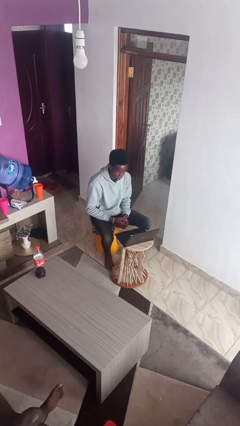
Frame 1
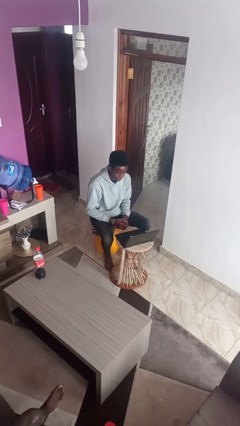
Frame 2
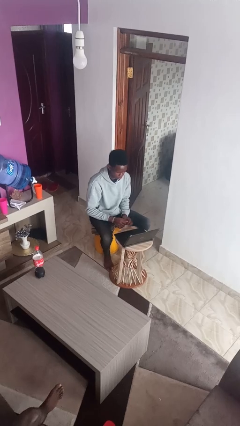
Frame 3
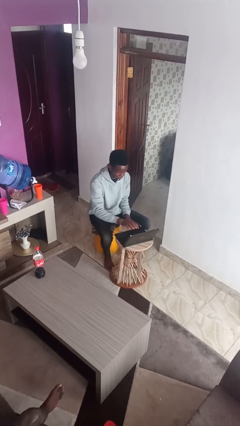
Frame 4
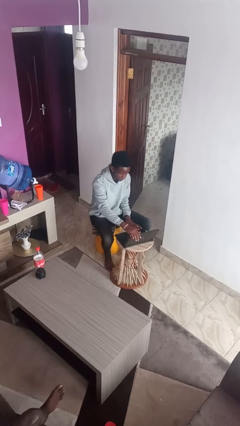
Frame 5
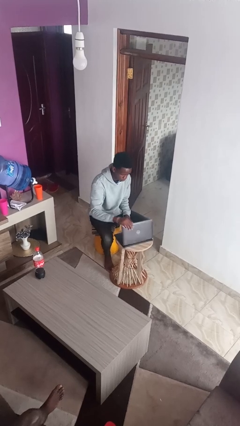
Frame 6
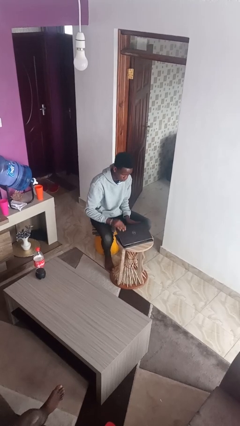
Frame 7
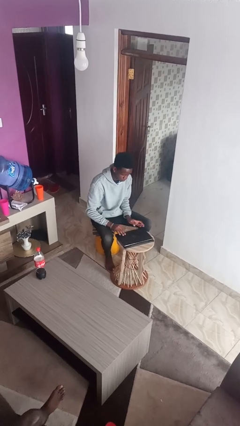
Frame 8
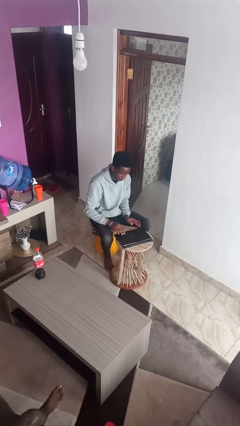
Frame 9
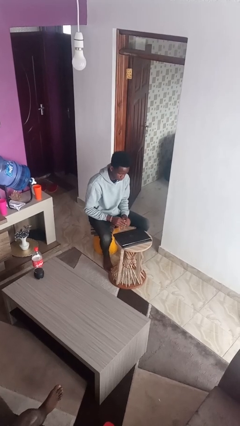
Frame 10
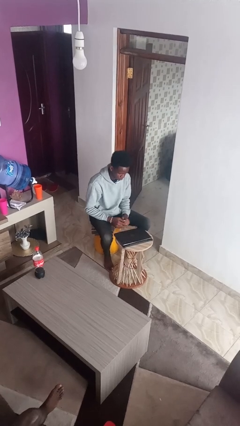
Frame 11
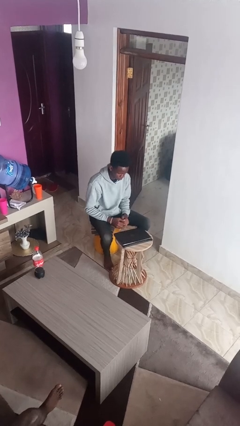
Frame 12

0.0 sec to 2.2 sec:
person closes laptop

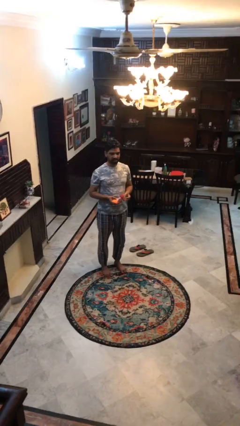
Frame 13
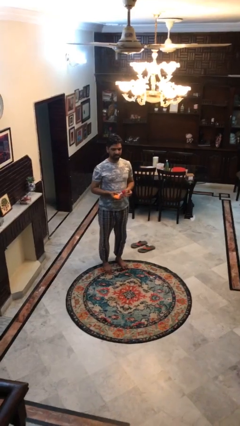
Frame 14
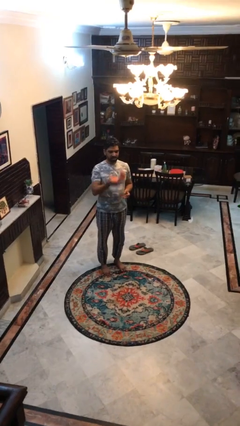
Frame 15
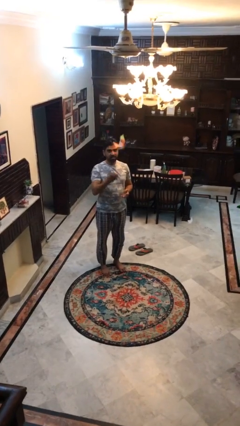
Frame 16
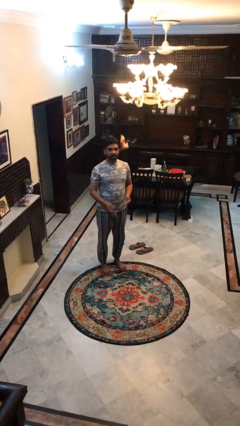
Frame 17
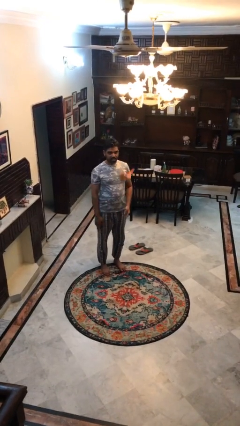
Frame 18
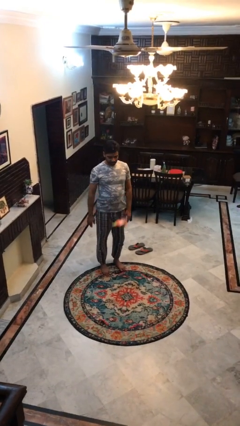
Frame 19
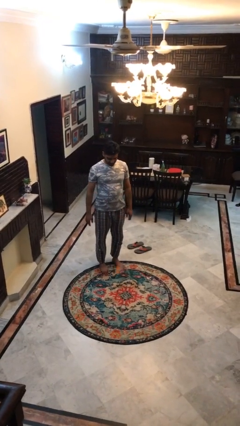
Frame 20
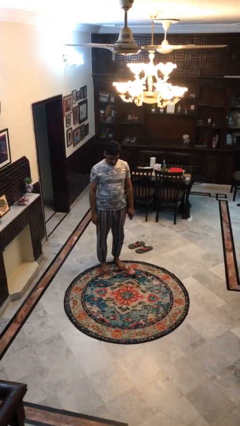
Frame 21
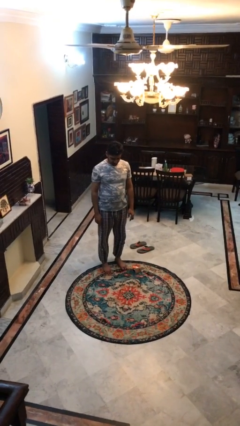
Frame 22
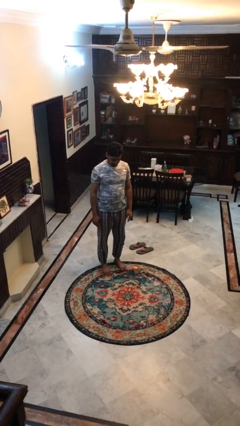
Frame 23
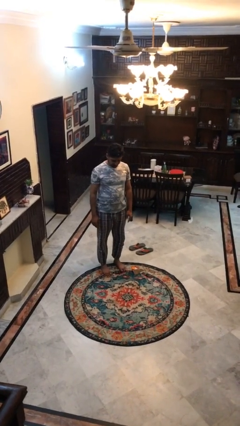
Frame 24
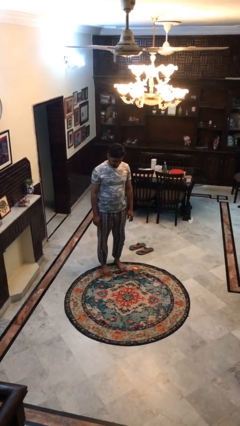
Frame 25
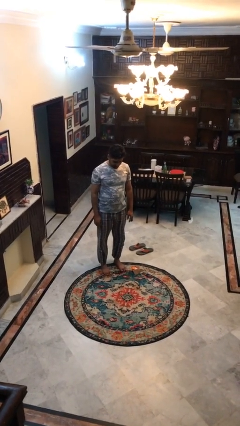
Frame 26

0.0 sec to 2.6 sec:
person throws object into air

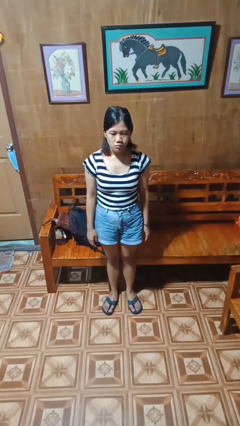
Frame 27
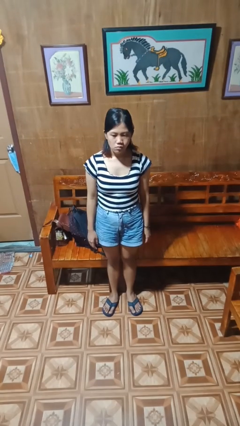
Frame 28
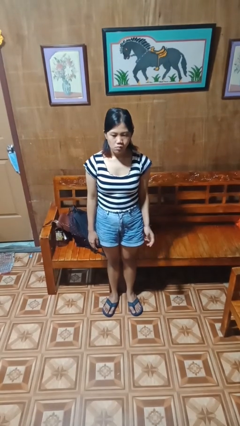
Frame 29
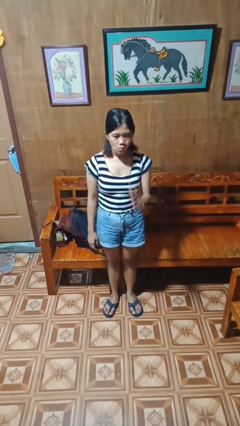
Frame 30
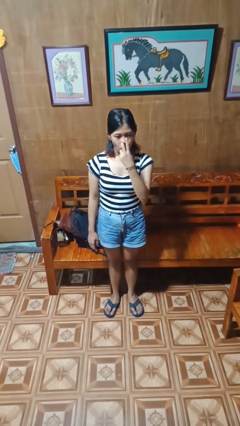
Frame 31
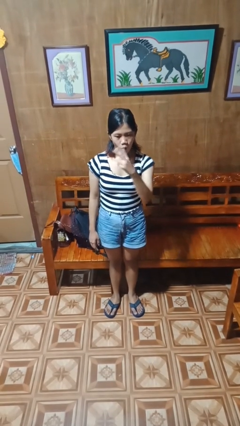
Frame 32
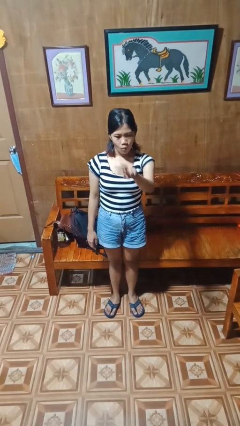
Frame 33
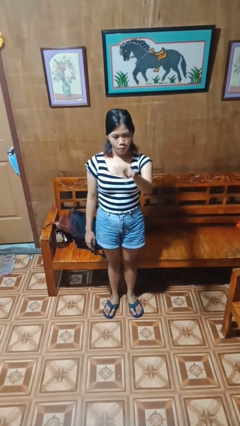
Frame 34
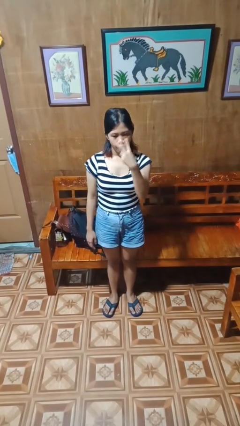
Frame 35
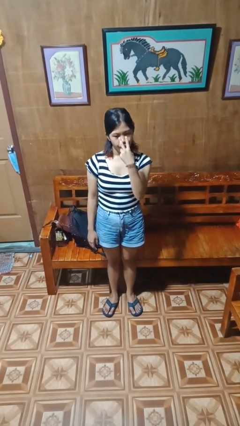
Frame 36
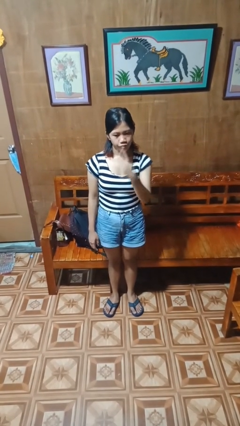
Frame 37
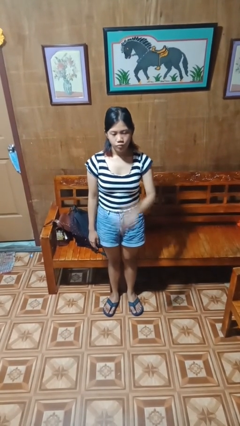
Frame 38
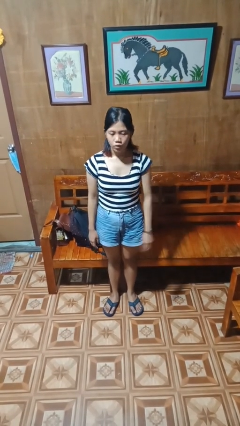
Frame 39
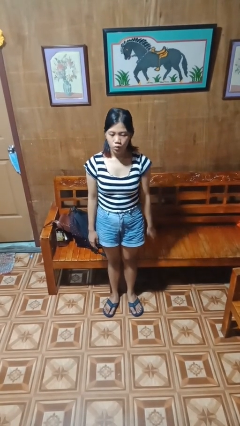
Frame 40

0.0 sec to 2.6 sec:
person gestures watch closely

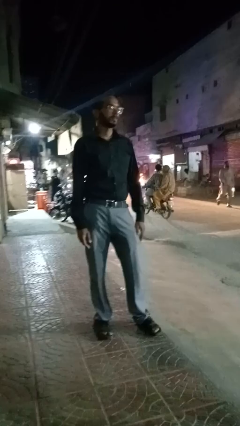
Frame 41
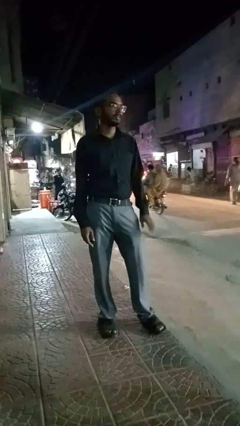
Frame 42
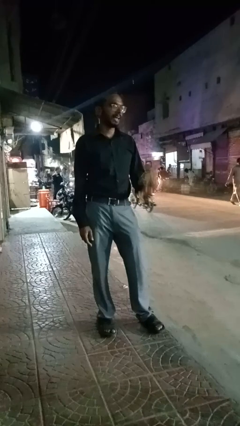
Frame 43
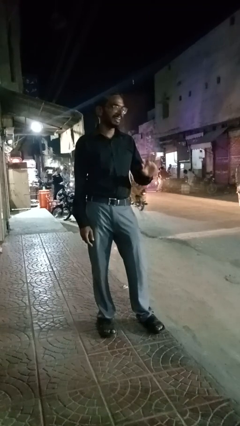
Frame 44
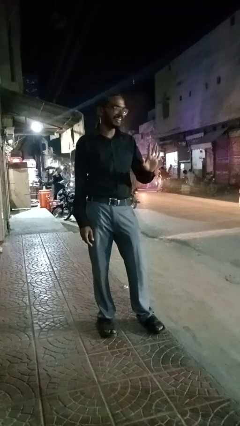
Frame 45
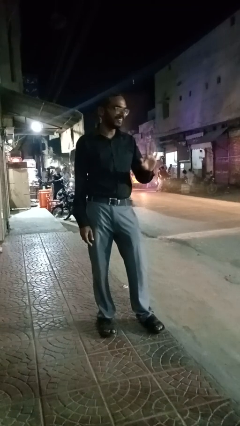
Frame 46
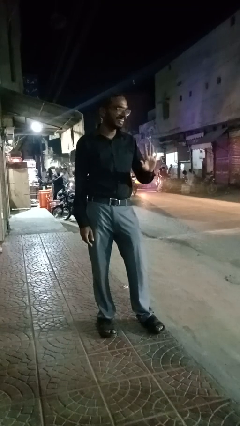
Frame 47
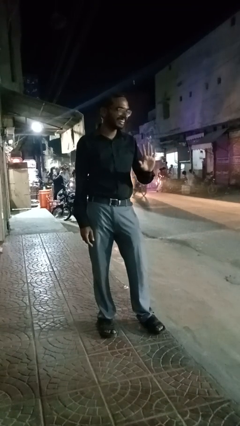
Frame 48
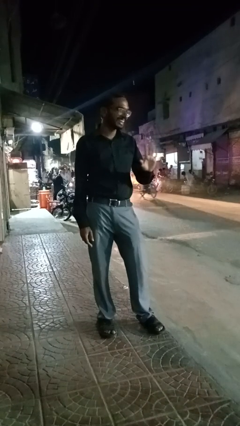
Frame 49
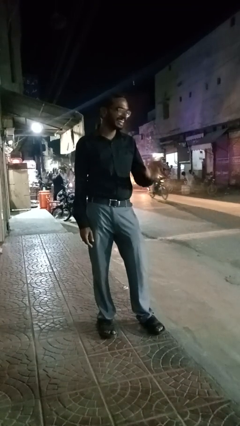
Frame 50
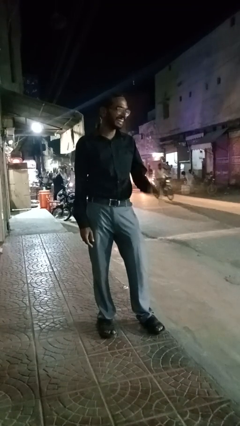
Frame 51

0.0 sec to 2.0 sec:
person waves at person

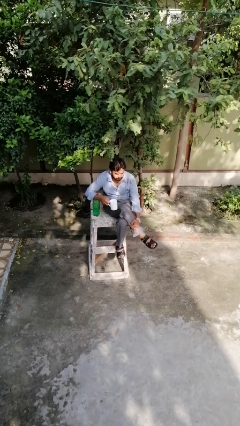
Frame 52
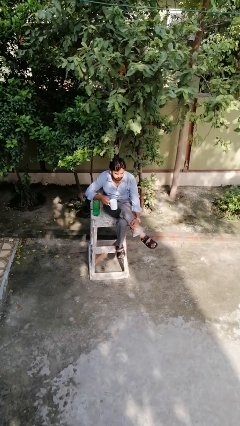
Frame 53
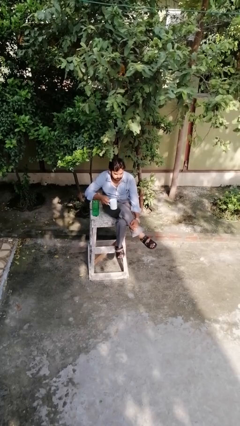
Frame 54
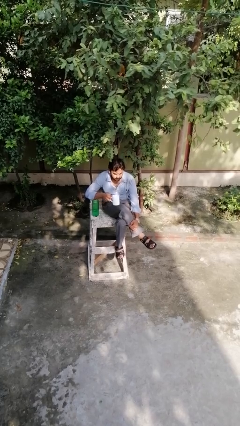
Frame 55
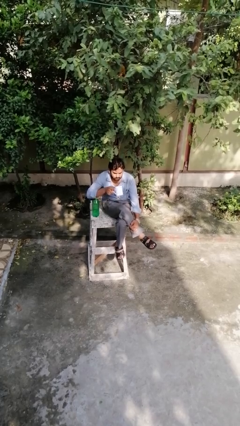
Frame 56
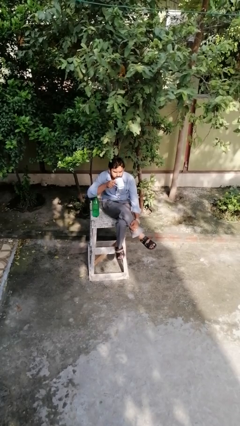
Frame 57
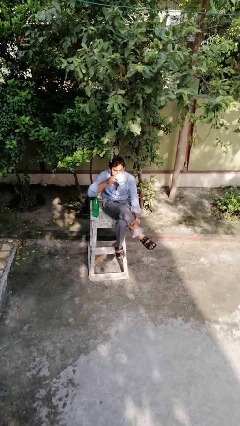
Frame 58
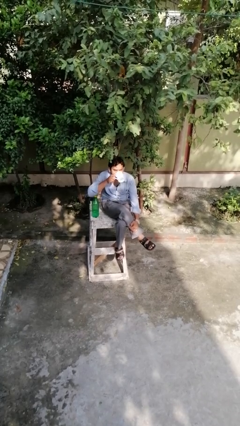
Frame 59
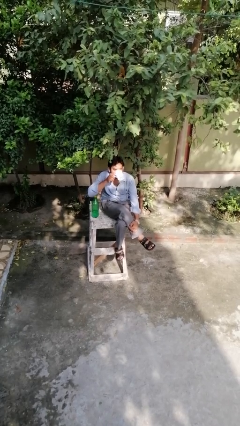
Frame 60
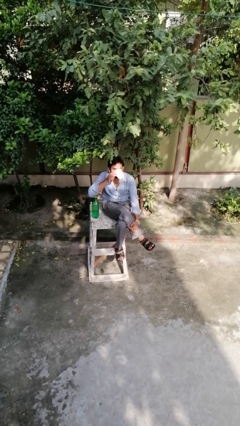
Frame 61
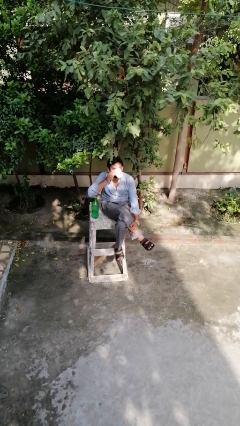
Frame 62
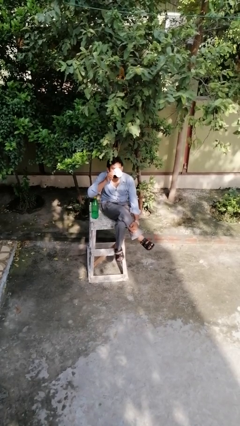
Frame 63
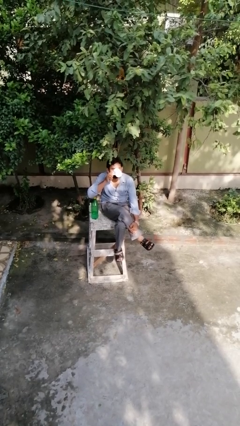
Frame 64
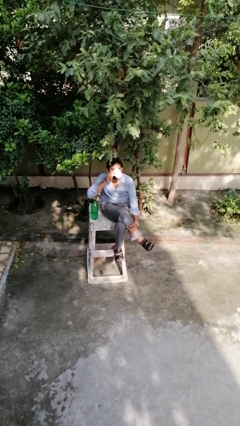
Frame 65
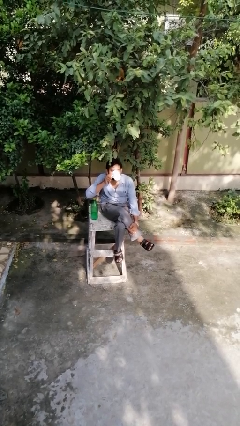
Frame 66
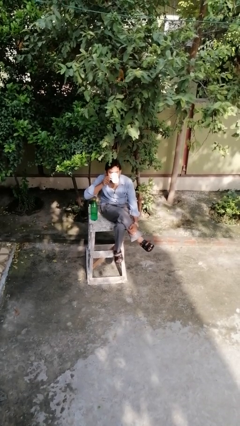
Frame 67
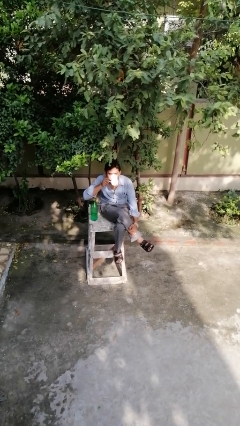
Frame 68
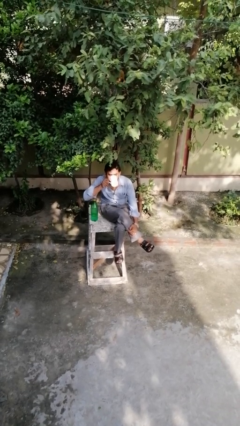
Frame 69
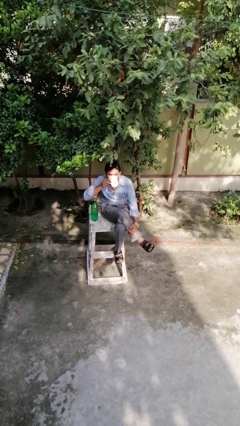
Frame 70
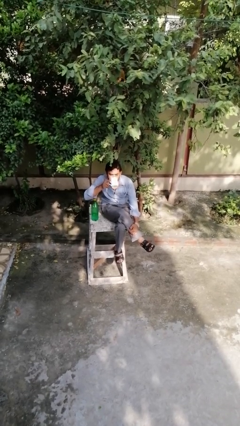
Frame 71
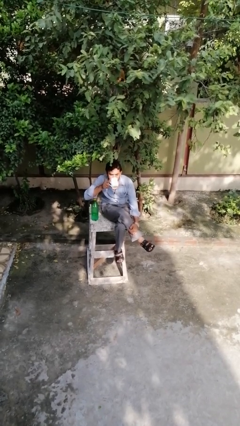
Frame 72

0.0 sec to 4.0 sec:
person drinks from mug

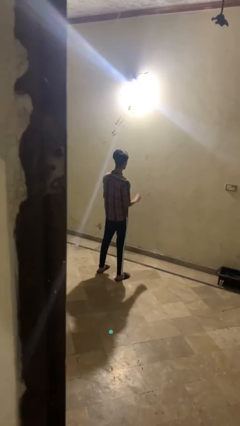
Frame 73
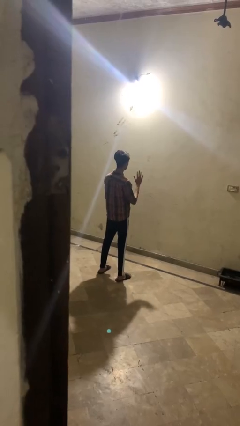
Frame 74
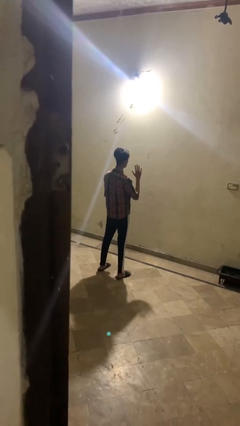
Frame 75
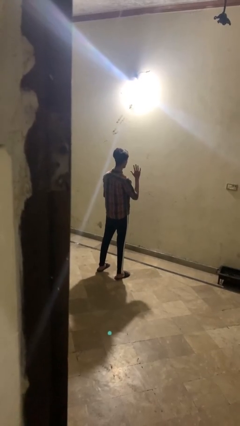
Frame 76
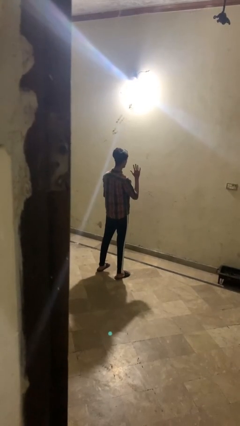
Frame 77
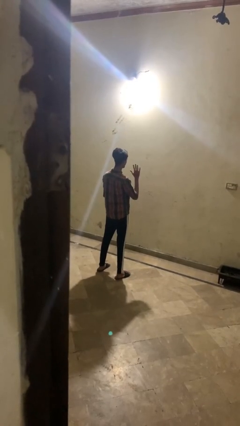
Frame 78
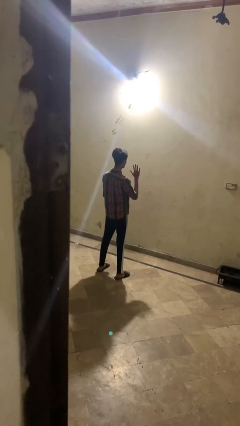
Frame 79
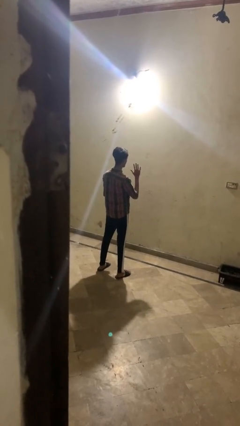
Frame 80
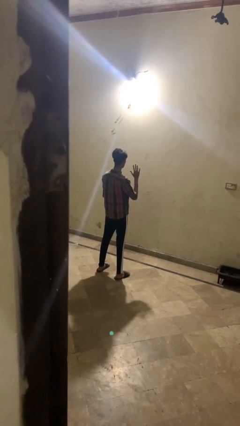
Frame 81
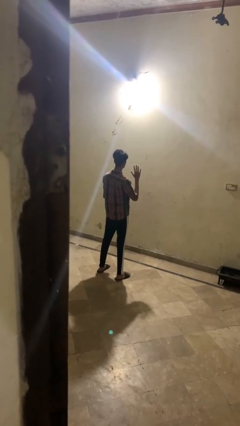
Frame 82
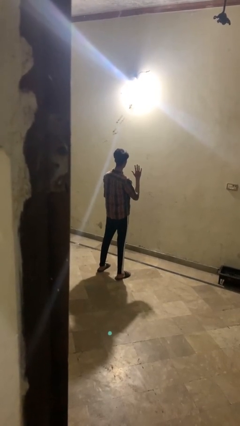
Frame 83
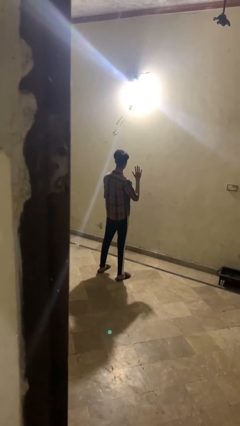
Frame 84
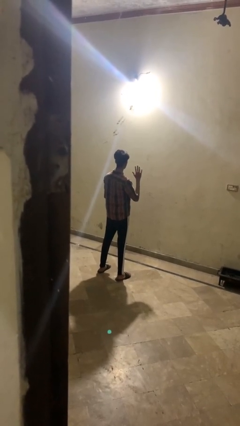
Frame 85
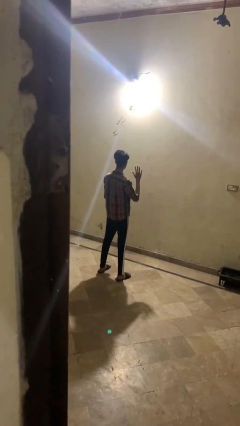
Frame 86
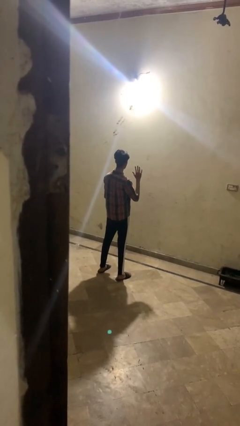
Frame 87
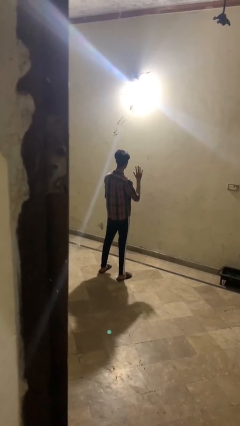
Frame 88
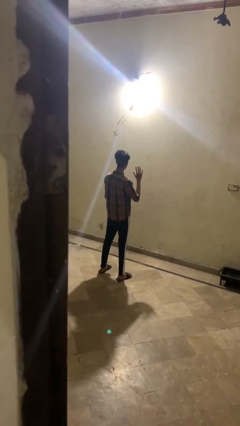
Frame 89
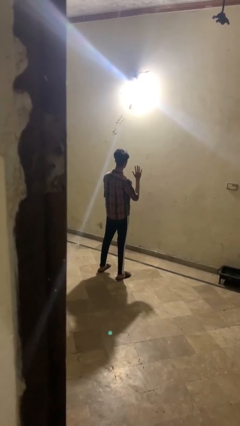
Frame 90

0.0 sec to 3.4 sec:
person gestures number five

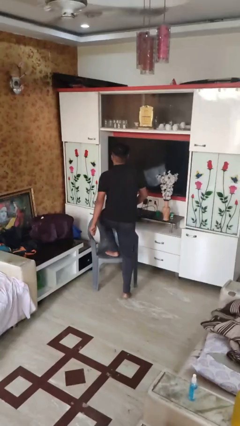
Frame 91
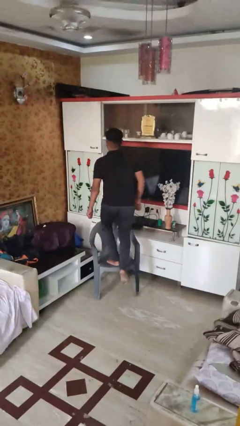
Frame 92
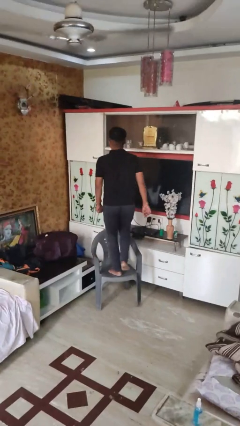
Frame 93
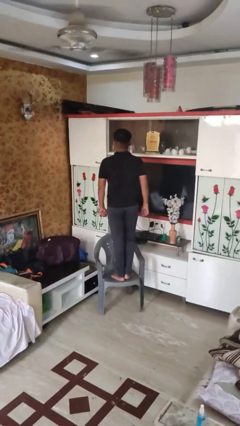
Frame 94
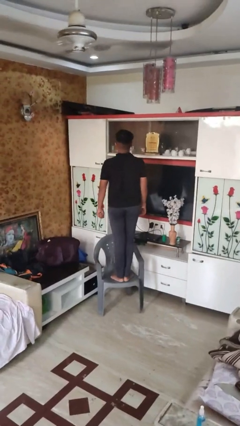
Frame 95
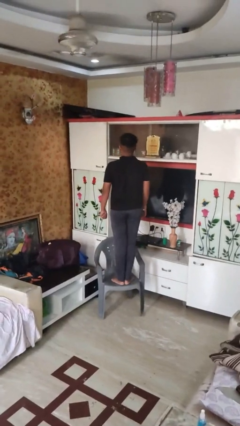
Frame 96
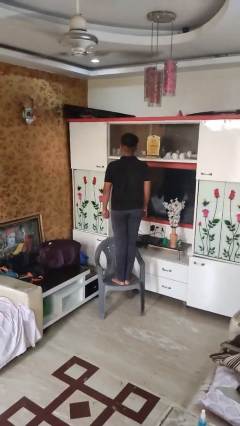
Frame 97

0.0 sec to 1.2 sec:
person climbs on chair
